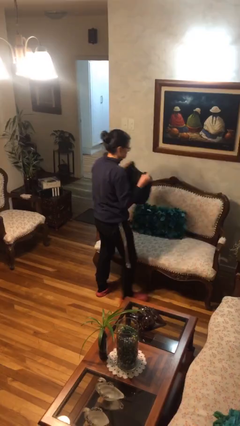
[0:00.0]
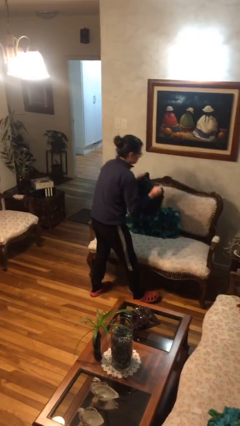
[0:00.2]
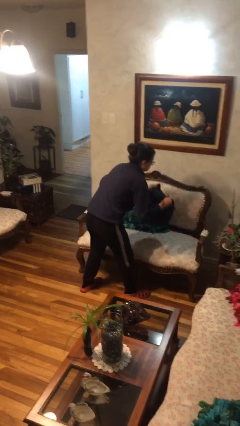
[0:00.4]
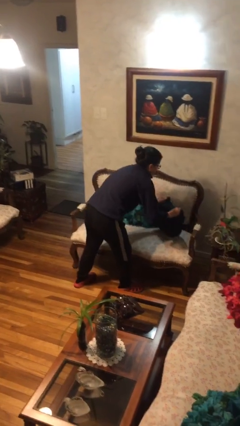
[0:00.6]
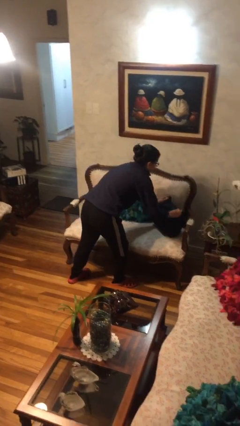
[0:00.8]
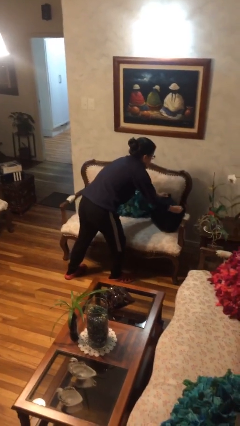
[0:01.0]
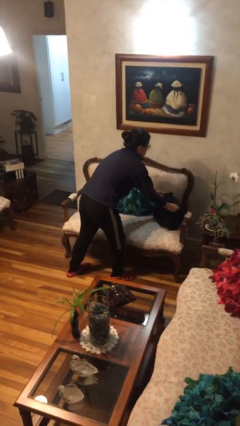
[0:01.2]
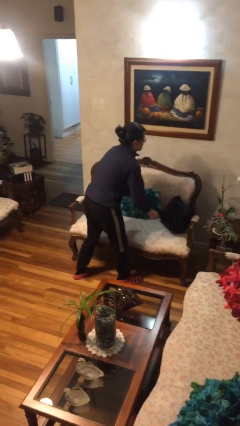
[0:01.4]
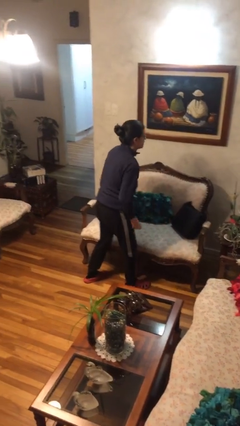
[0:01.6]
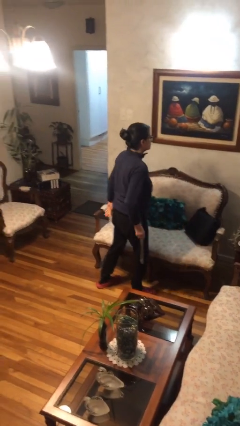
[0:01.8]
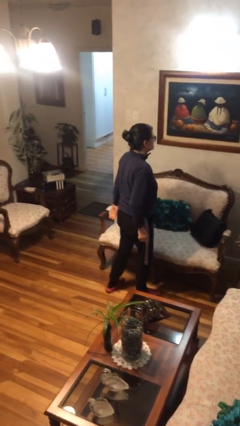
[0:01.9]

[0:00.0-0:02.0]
person puts down object on couch

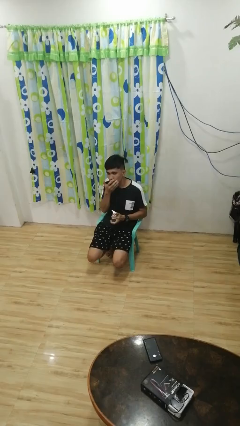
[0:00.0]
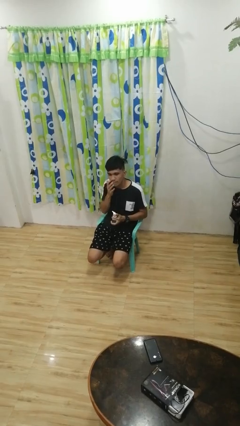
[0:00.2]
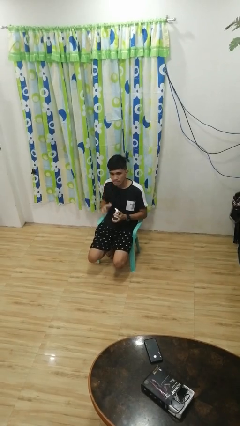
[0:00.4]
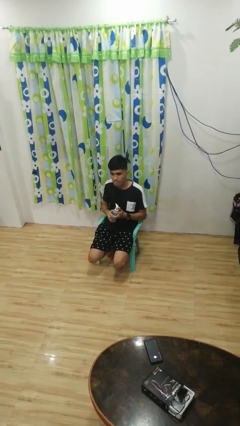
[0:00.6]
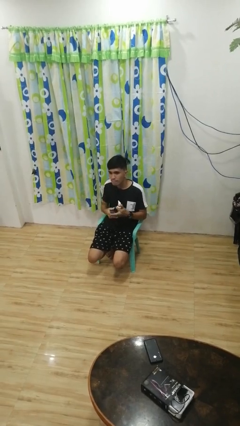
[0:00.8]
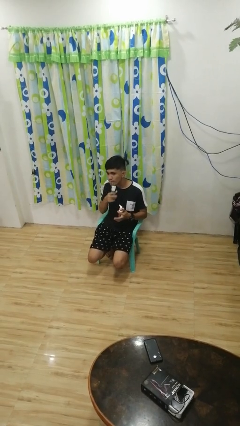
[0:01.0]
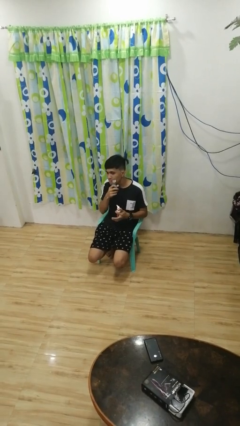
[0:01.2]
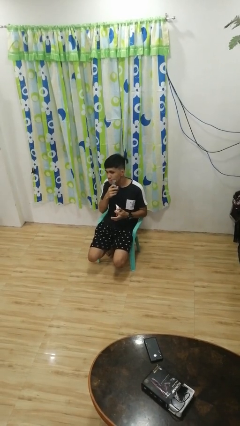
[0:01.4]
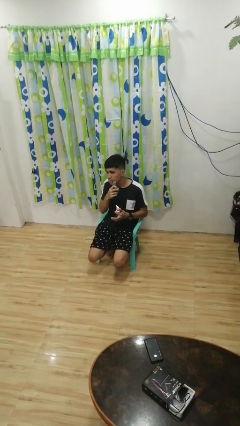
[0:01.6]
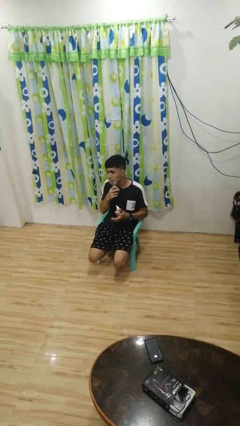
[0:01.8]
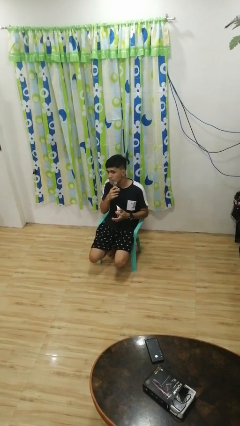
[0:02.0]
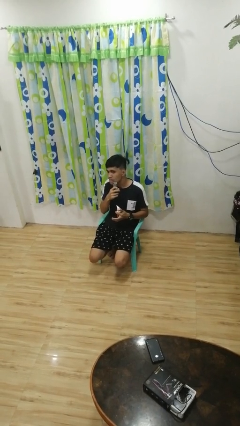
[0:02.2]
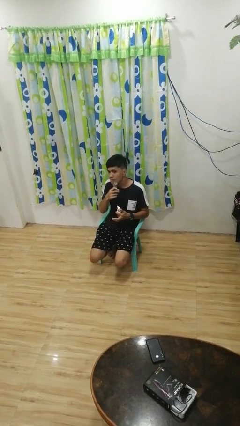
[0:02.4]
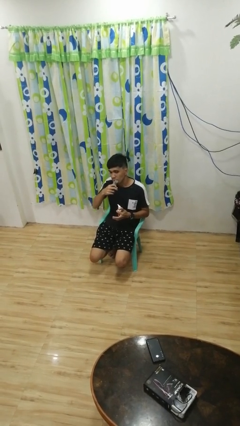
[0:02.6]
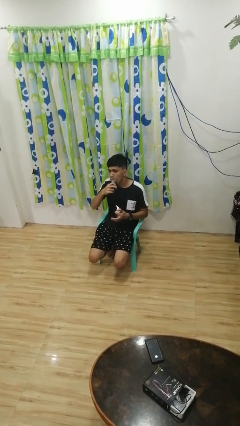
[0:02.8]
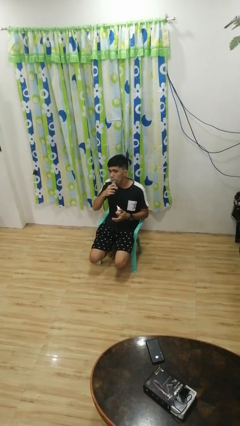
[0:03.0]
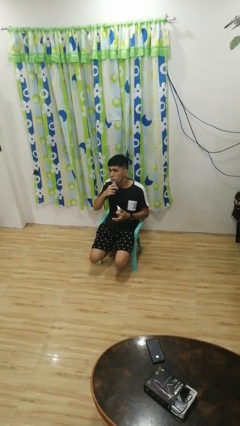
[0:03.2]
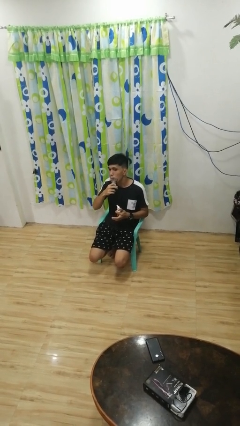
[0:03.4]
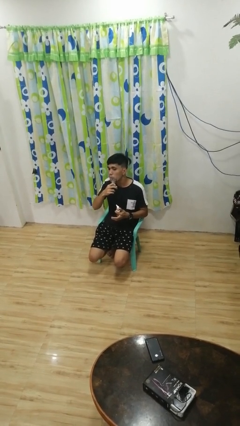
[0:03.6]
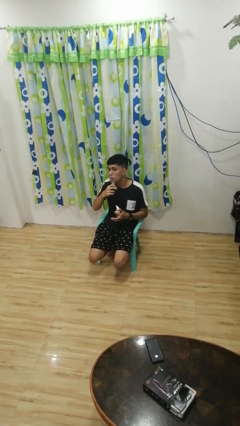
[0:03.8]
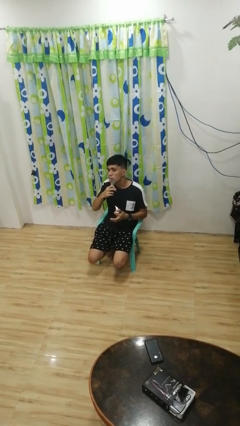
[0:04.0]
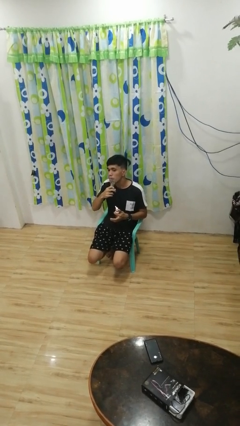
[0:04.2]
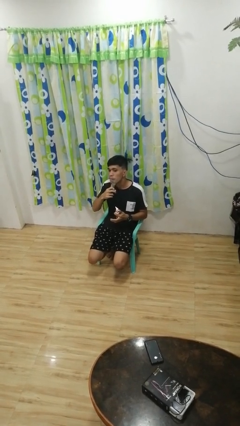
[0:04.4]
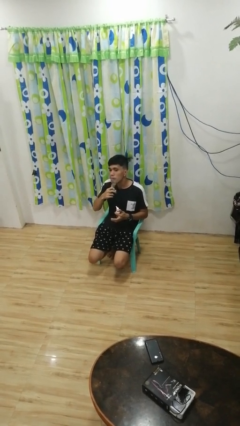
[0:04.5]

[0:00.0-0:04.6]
person shaves face

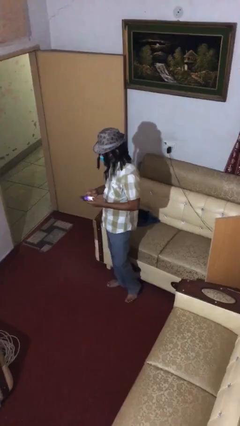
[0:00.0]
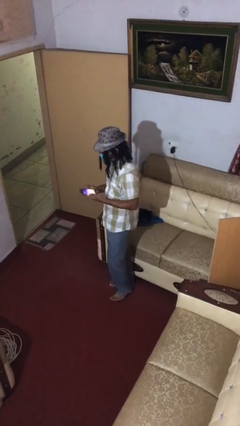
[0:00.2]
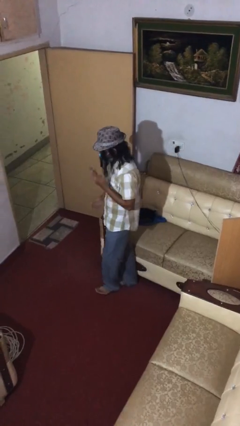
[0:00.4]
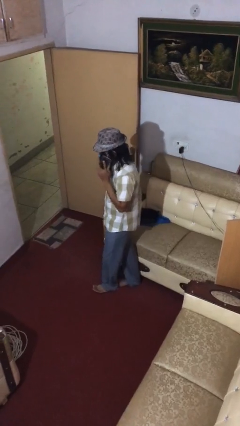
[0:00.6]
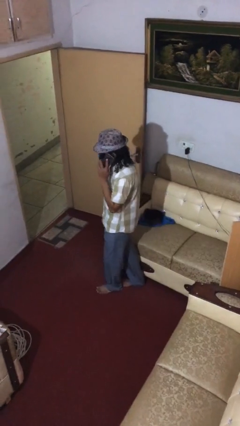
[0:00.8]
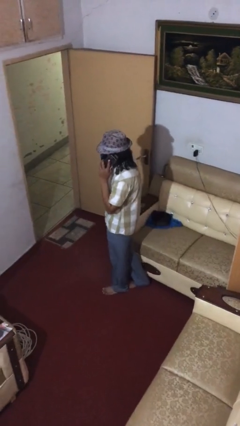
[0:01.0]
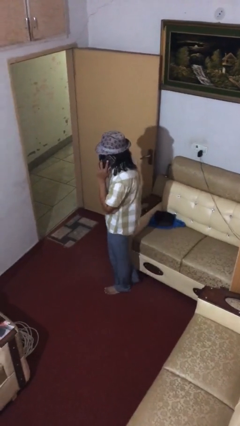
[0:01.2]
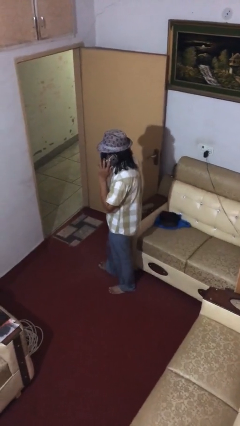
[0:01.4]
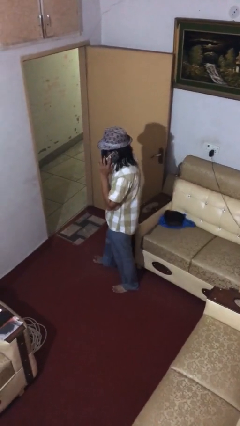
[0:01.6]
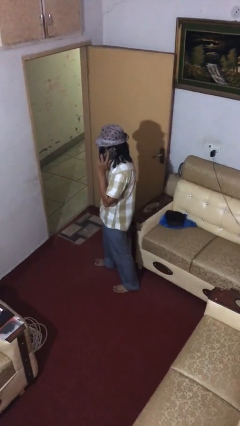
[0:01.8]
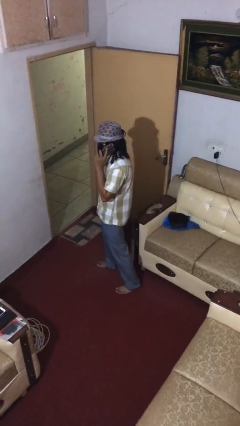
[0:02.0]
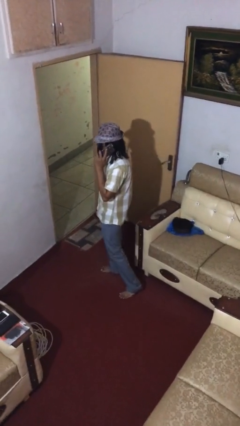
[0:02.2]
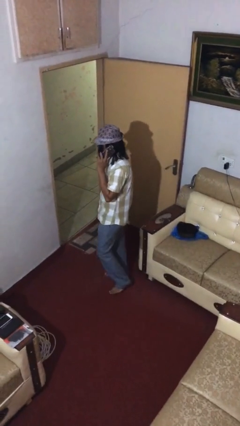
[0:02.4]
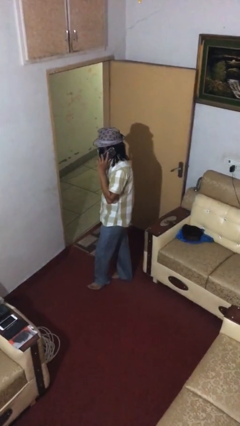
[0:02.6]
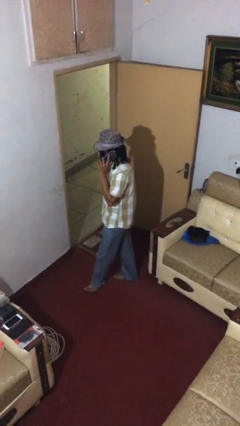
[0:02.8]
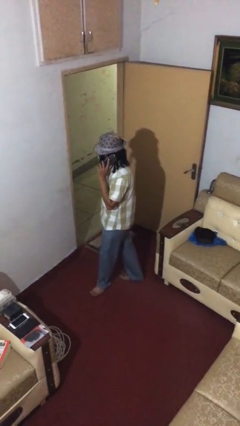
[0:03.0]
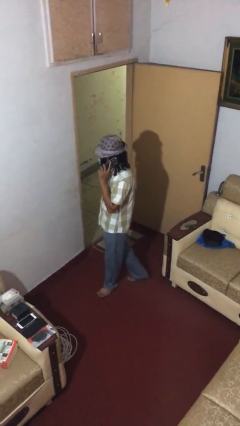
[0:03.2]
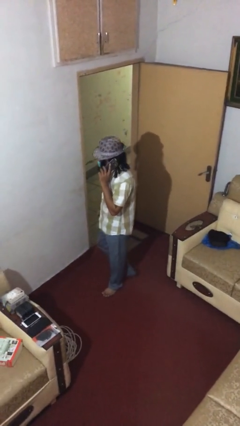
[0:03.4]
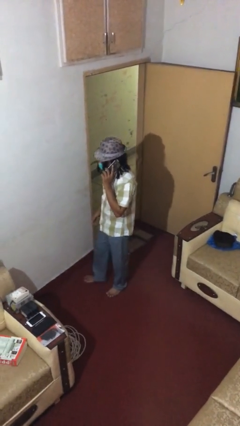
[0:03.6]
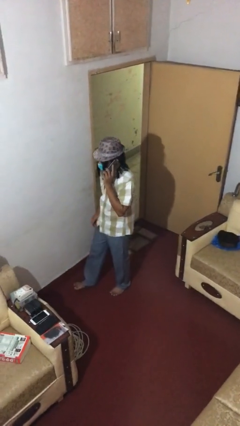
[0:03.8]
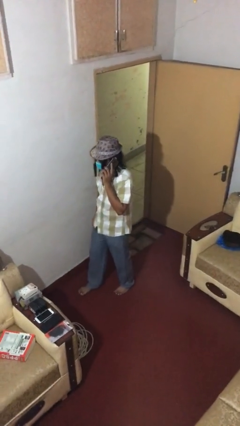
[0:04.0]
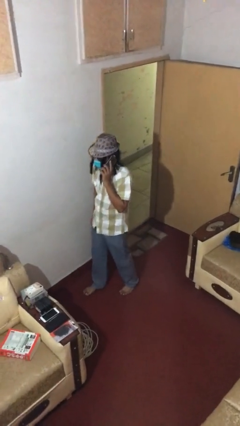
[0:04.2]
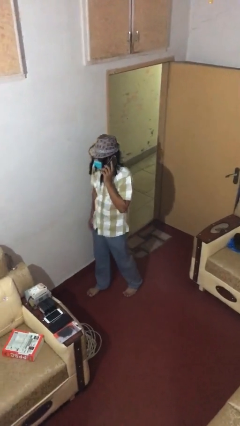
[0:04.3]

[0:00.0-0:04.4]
person talks on phone

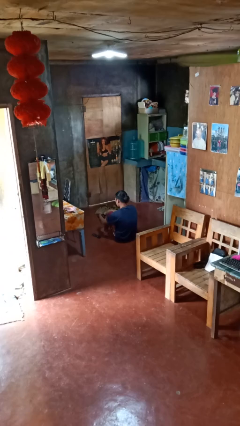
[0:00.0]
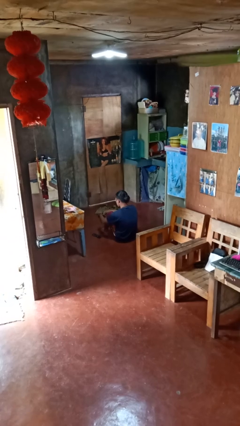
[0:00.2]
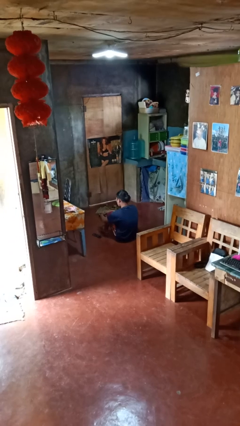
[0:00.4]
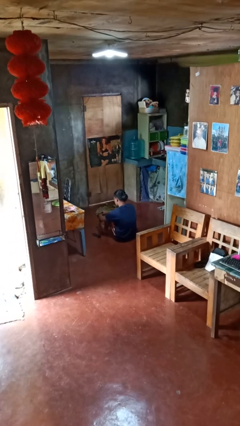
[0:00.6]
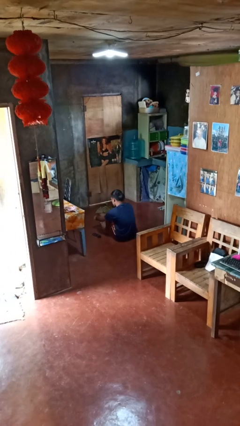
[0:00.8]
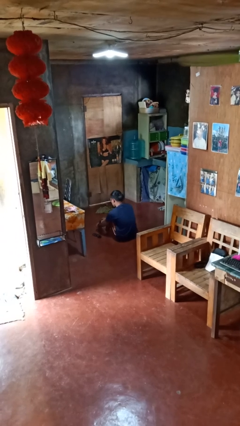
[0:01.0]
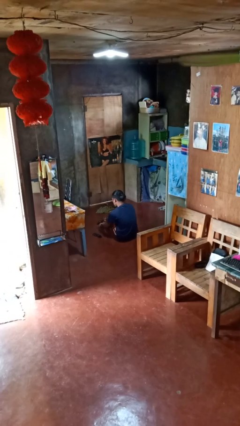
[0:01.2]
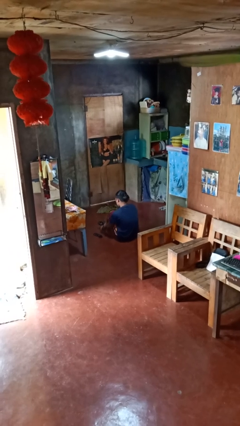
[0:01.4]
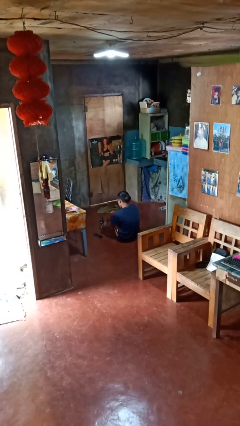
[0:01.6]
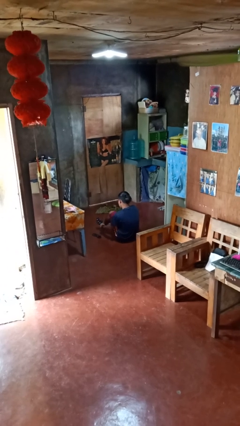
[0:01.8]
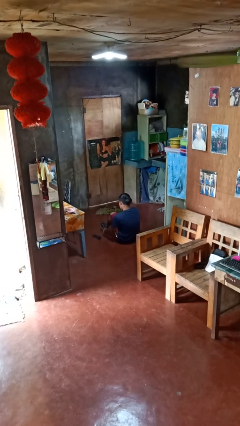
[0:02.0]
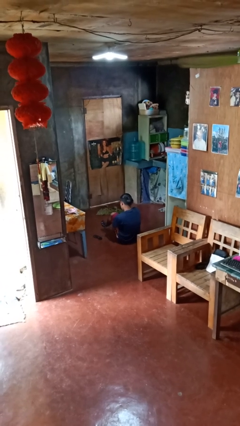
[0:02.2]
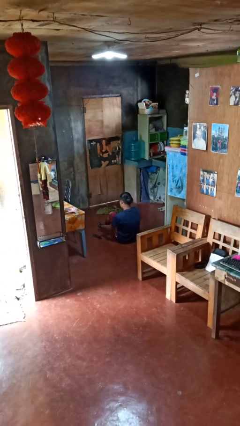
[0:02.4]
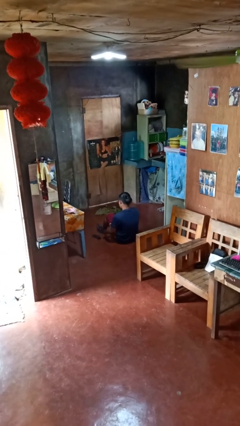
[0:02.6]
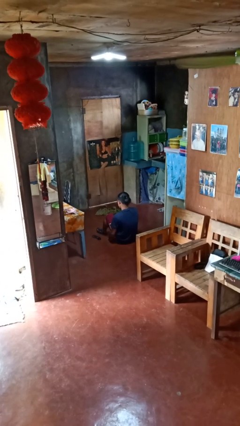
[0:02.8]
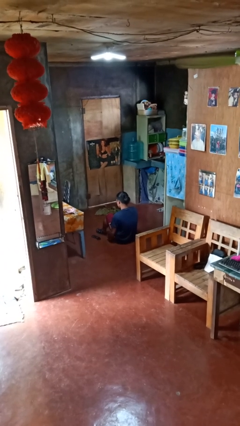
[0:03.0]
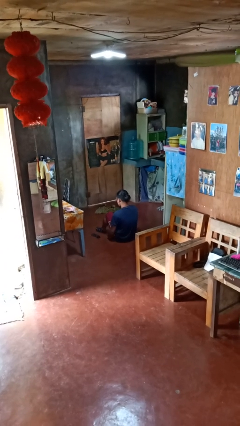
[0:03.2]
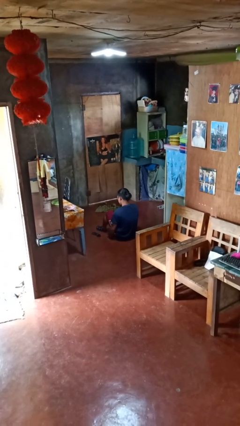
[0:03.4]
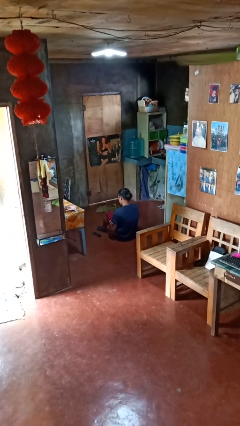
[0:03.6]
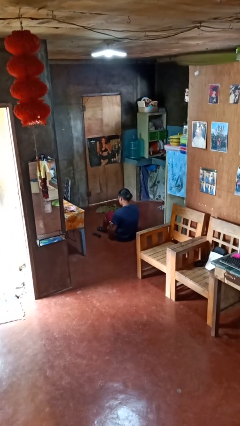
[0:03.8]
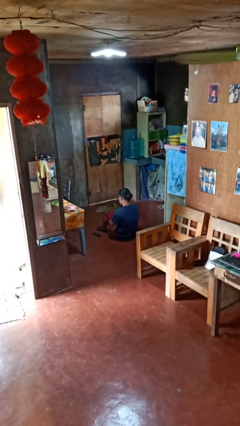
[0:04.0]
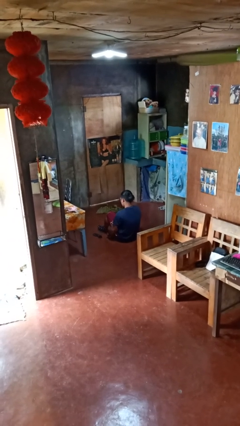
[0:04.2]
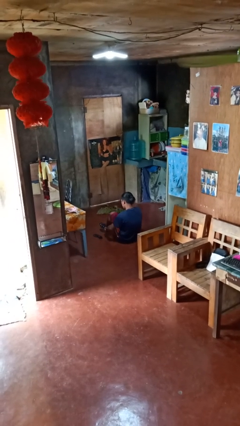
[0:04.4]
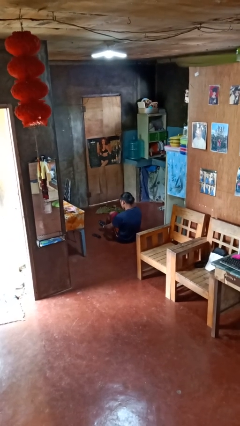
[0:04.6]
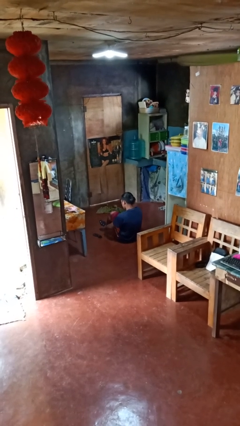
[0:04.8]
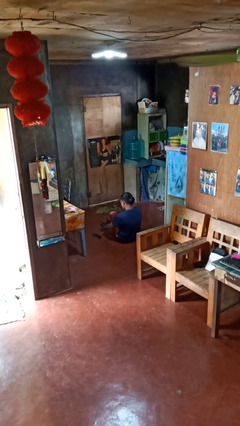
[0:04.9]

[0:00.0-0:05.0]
person puts on socks

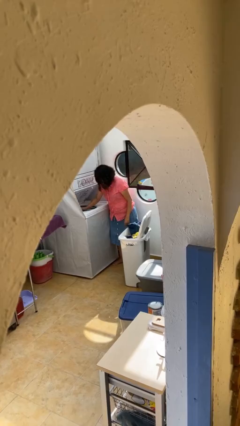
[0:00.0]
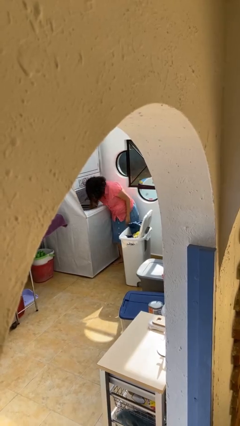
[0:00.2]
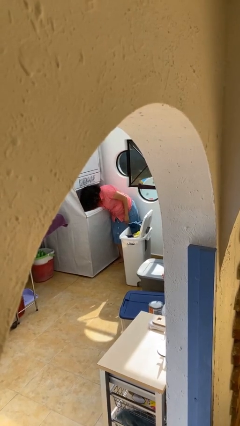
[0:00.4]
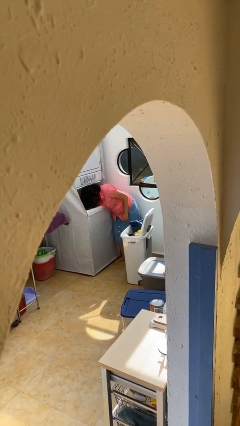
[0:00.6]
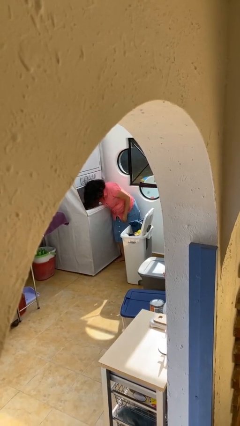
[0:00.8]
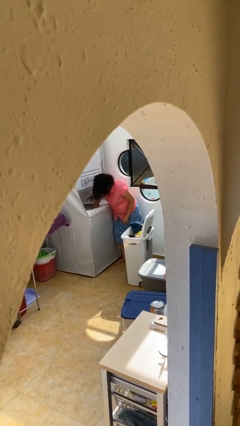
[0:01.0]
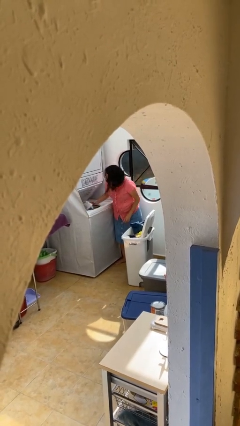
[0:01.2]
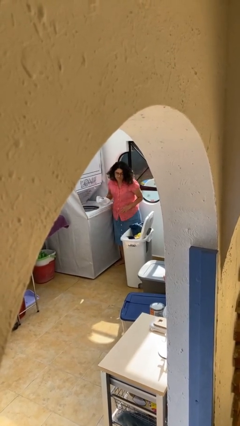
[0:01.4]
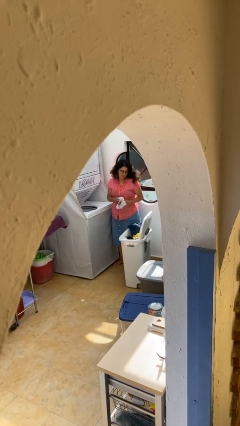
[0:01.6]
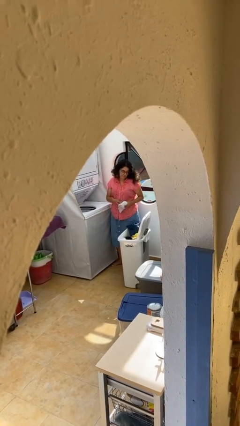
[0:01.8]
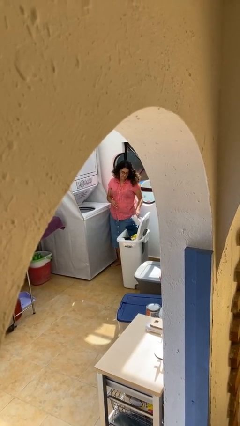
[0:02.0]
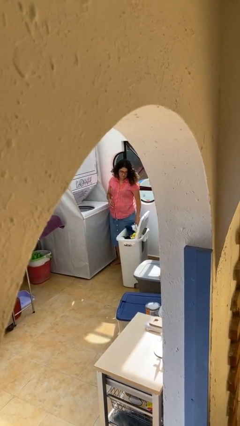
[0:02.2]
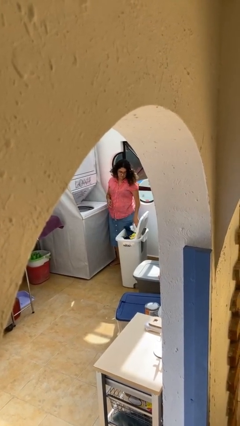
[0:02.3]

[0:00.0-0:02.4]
person loads clotheswasher
